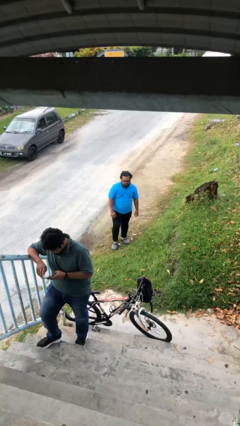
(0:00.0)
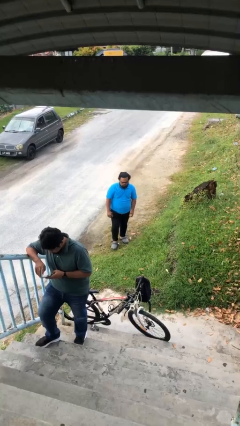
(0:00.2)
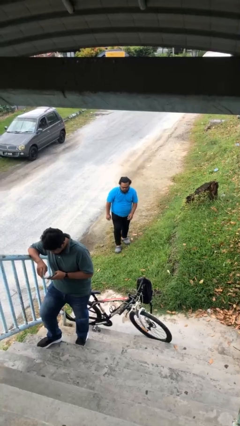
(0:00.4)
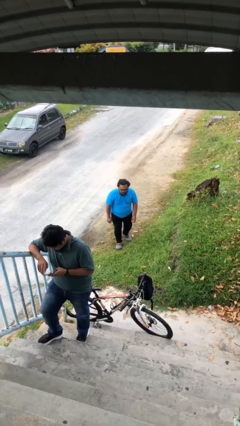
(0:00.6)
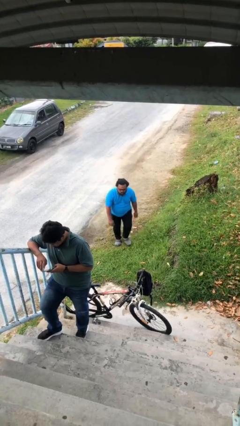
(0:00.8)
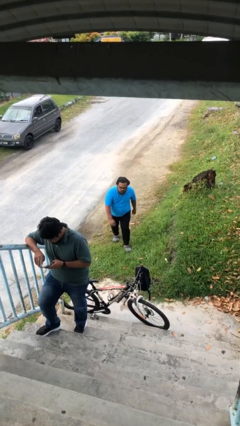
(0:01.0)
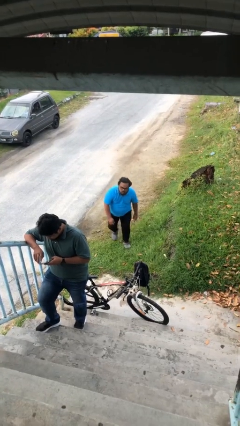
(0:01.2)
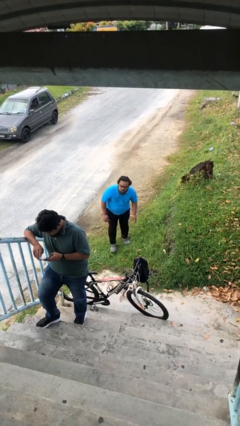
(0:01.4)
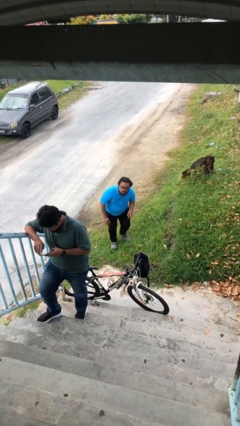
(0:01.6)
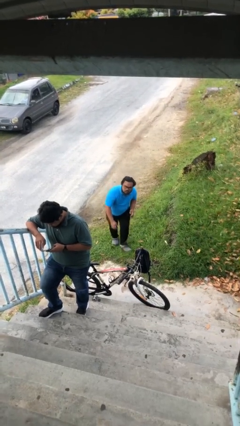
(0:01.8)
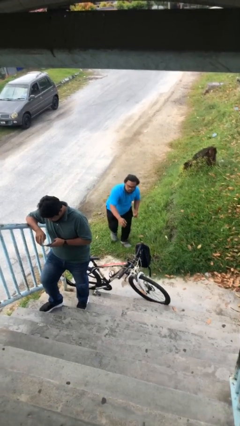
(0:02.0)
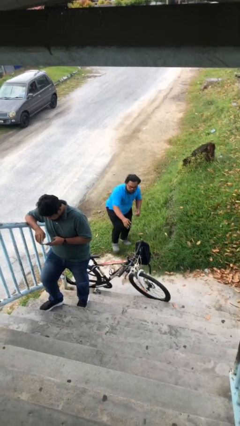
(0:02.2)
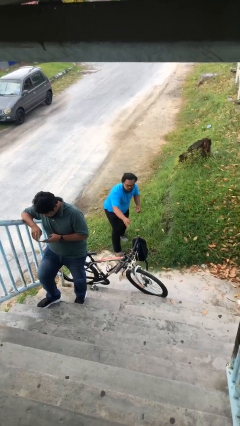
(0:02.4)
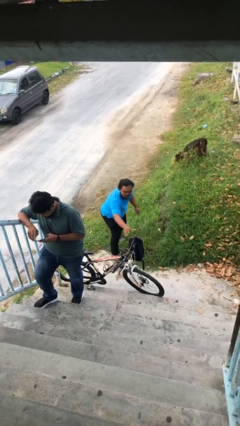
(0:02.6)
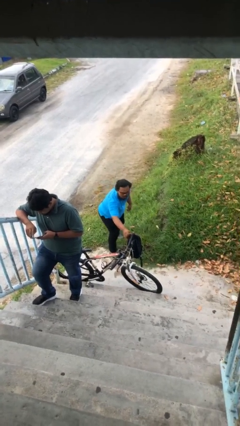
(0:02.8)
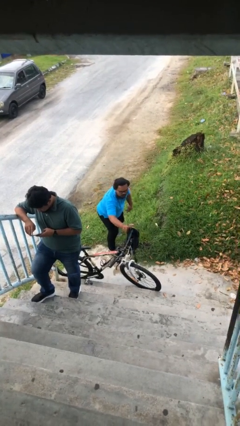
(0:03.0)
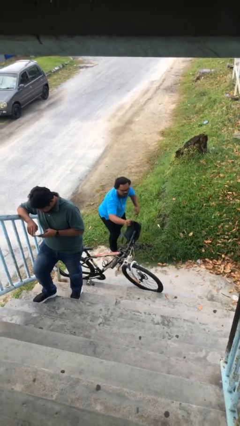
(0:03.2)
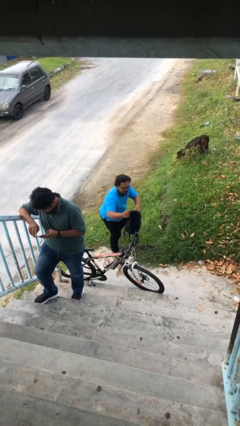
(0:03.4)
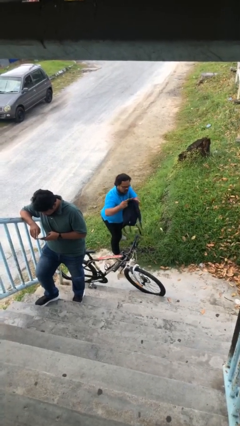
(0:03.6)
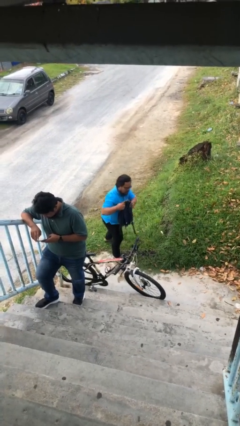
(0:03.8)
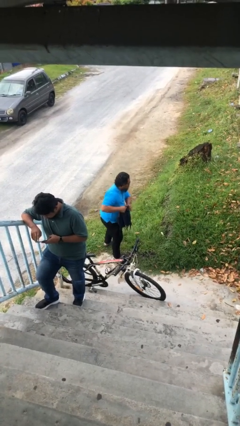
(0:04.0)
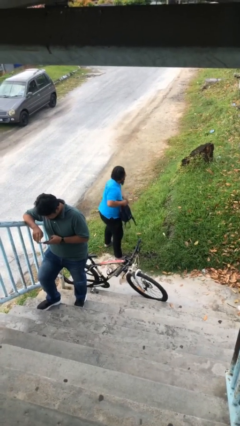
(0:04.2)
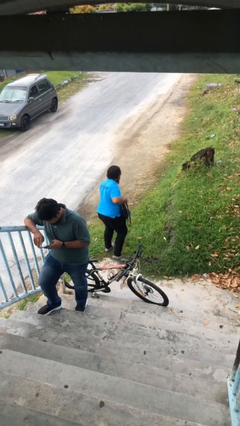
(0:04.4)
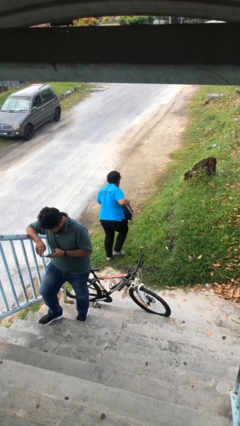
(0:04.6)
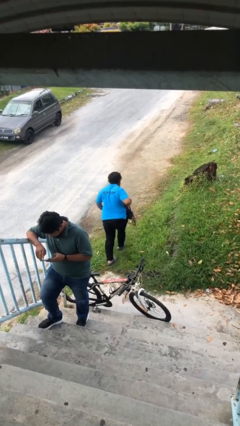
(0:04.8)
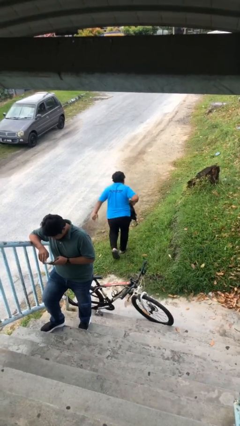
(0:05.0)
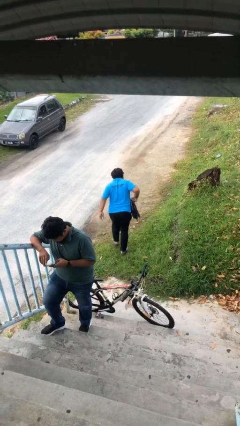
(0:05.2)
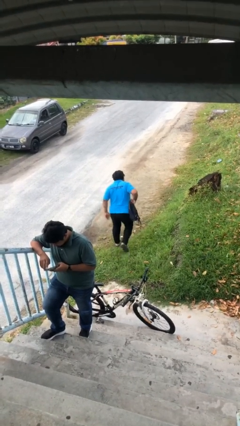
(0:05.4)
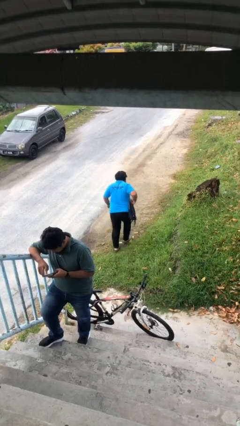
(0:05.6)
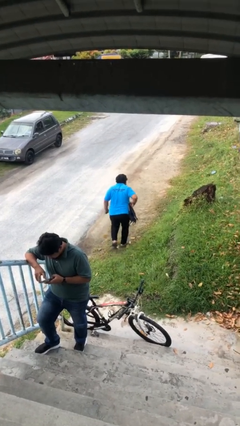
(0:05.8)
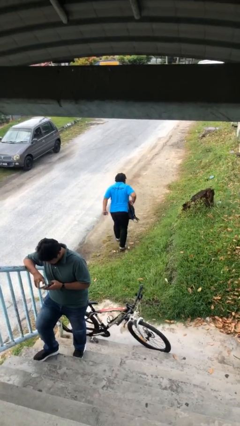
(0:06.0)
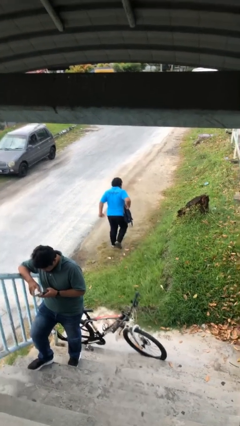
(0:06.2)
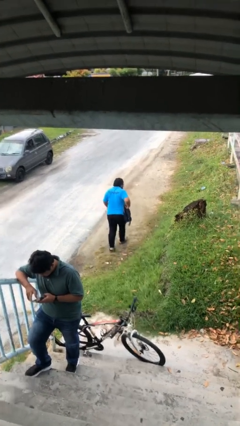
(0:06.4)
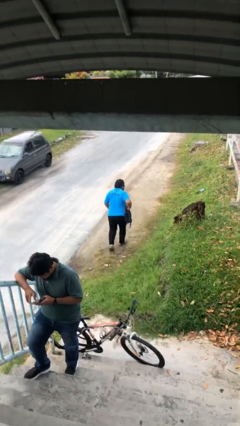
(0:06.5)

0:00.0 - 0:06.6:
person steals object from person

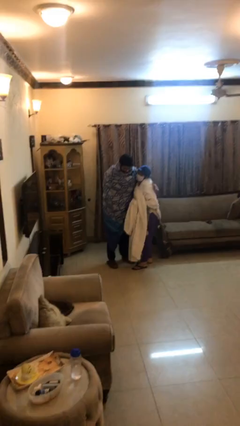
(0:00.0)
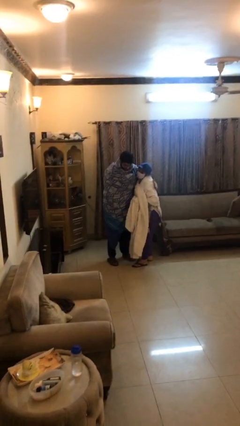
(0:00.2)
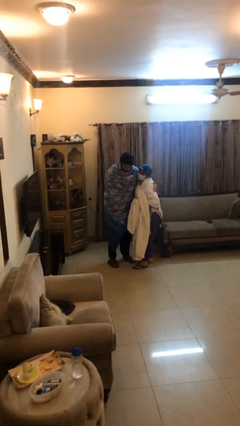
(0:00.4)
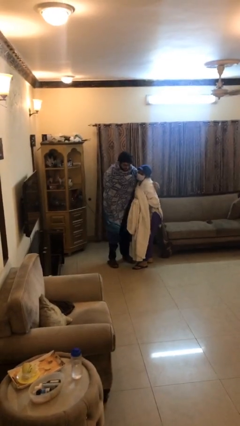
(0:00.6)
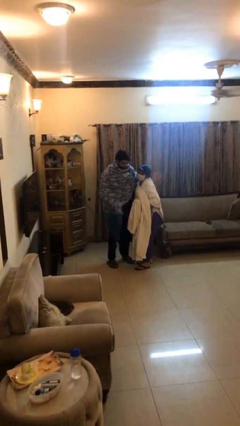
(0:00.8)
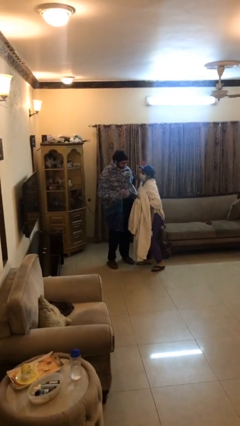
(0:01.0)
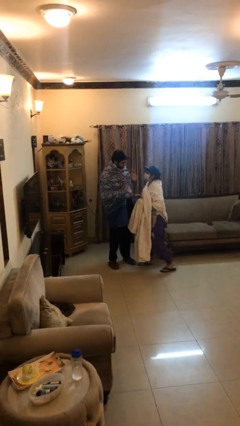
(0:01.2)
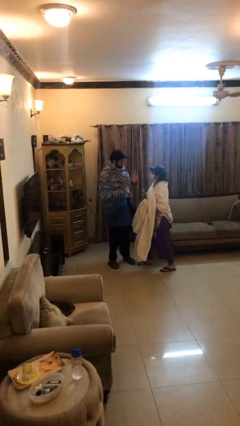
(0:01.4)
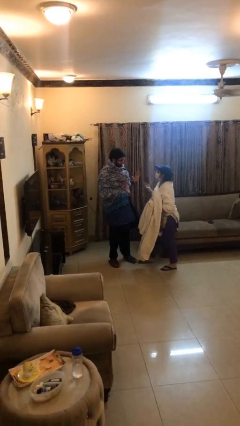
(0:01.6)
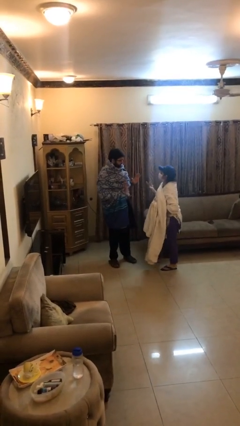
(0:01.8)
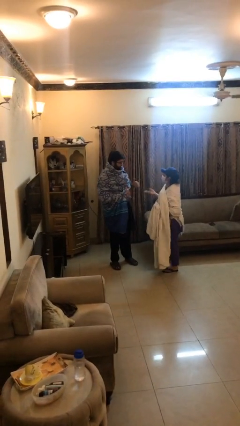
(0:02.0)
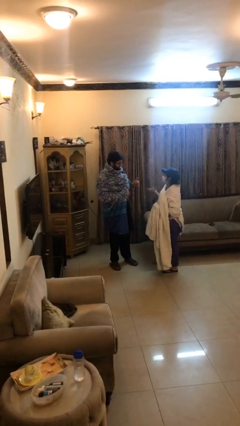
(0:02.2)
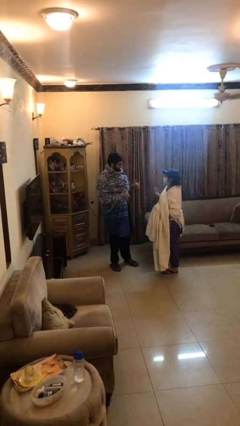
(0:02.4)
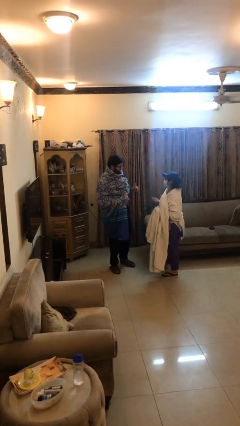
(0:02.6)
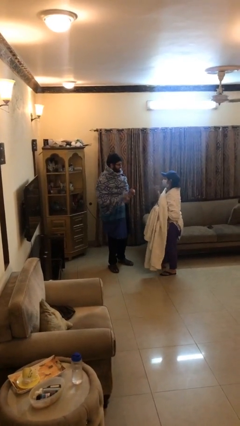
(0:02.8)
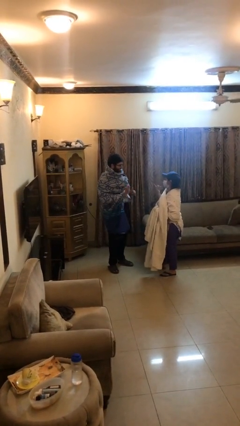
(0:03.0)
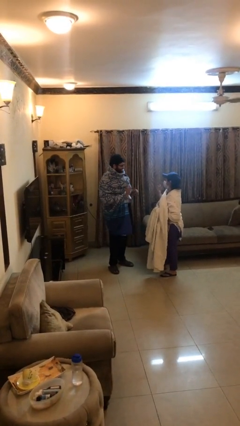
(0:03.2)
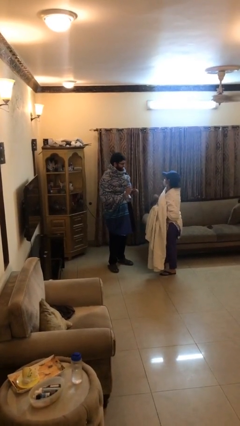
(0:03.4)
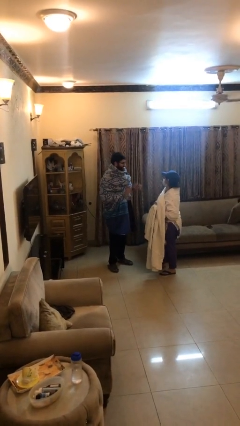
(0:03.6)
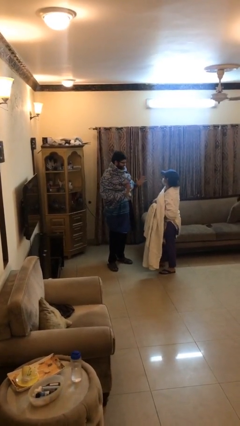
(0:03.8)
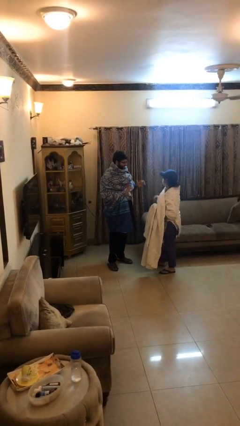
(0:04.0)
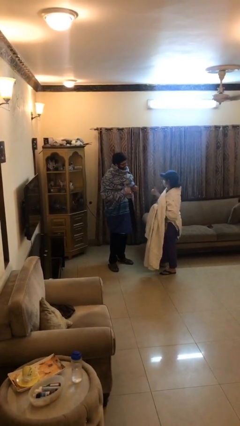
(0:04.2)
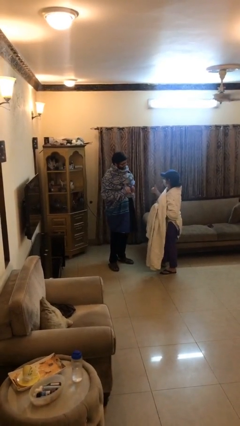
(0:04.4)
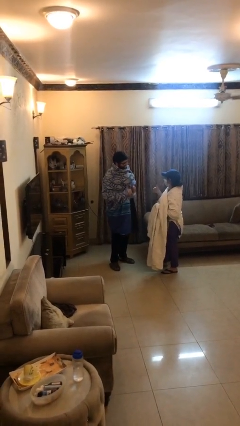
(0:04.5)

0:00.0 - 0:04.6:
person talks to person

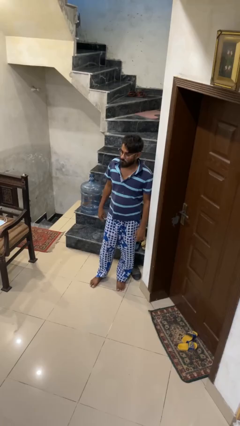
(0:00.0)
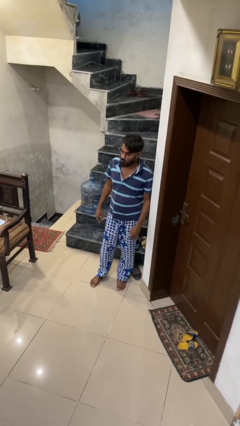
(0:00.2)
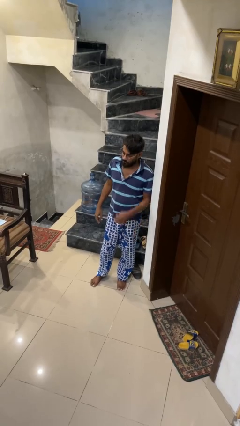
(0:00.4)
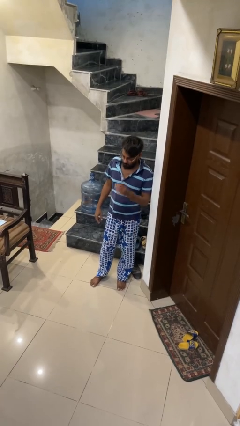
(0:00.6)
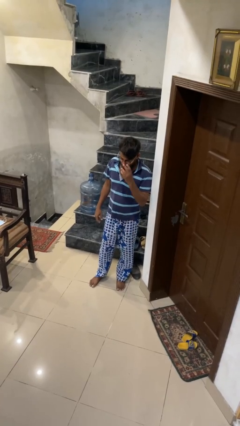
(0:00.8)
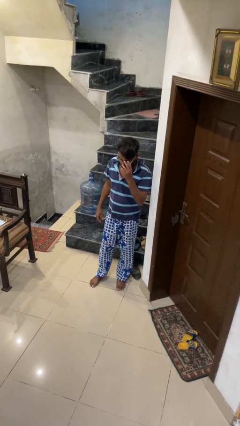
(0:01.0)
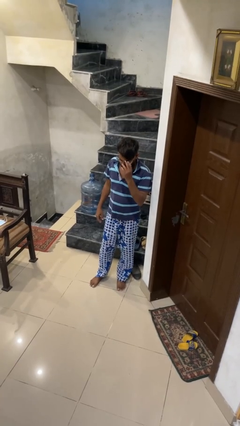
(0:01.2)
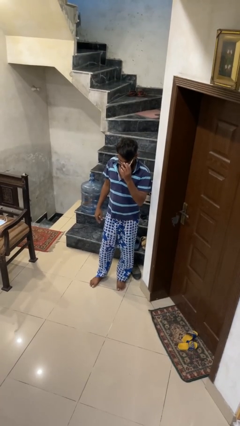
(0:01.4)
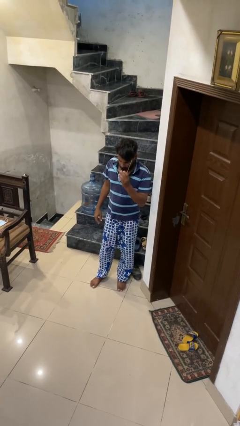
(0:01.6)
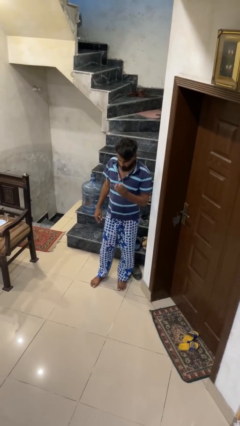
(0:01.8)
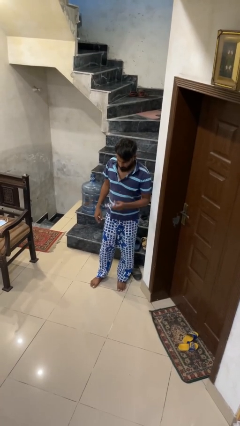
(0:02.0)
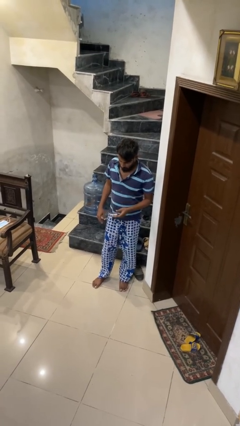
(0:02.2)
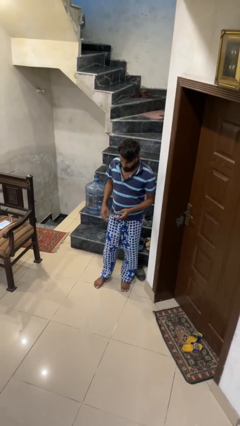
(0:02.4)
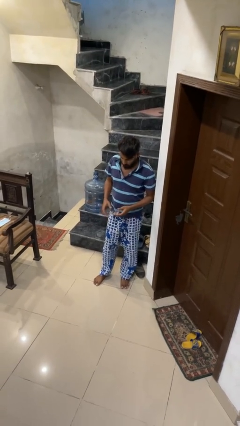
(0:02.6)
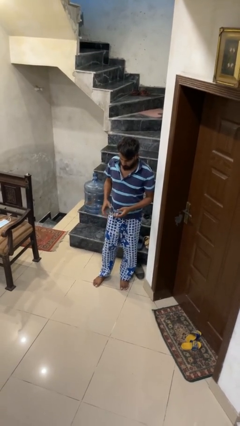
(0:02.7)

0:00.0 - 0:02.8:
person takes off glasses

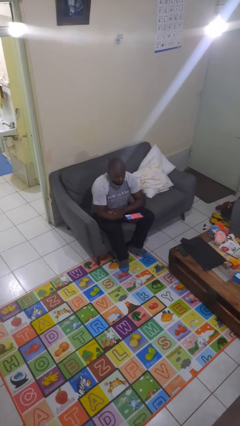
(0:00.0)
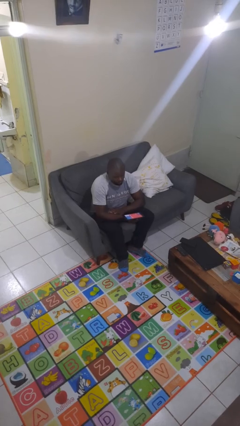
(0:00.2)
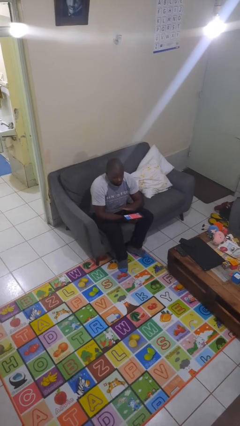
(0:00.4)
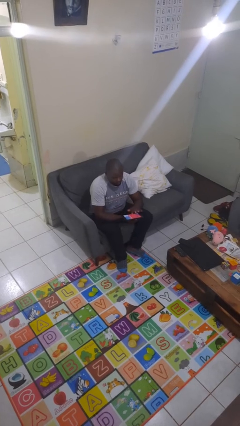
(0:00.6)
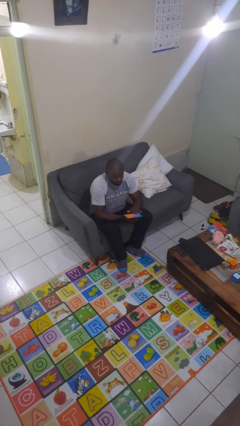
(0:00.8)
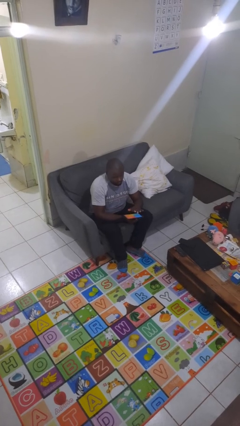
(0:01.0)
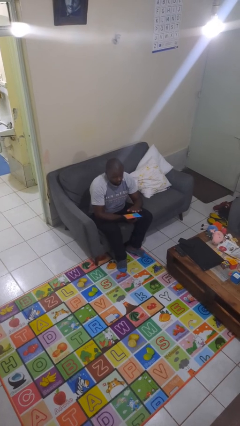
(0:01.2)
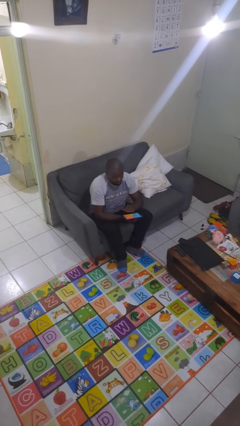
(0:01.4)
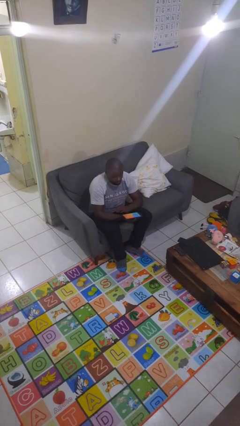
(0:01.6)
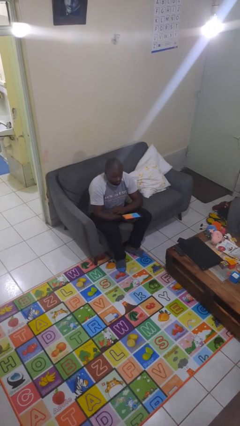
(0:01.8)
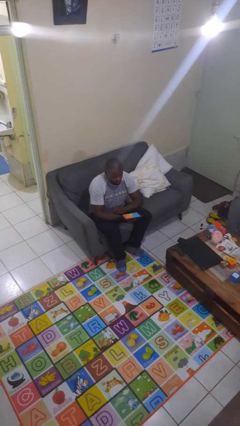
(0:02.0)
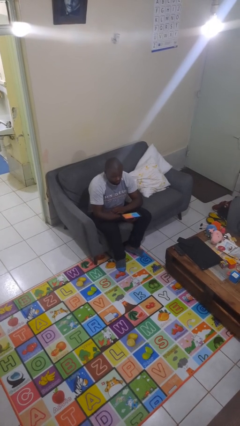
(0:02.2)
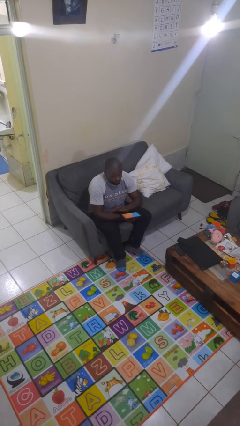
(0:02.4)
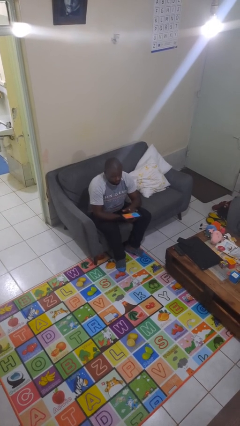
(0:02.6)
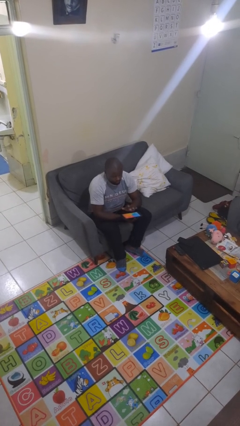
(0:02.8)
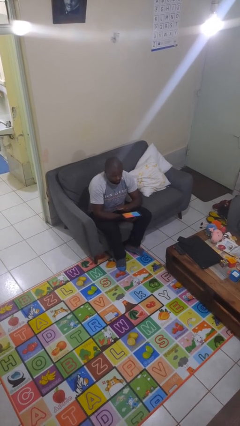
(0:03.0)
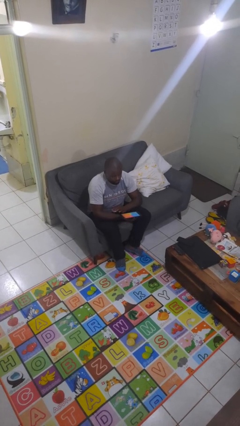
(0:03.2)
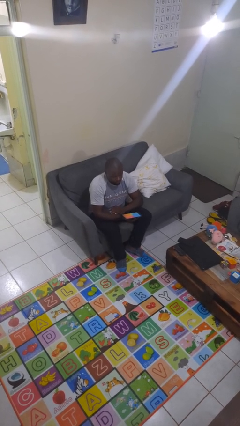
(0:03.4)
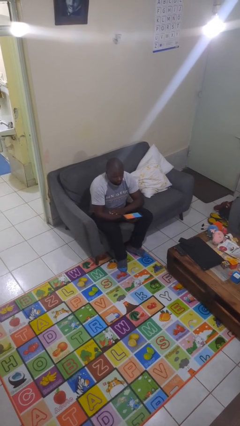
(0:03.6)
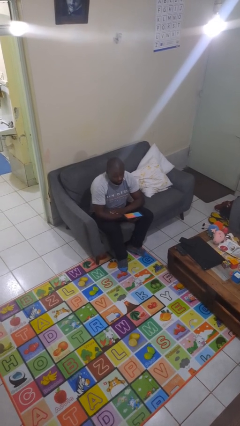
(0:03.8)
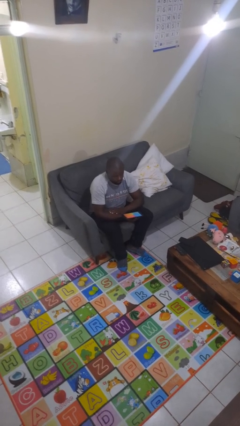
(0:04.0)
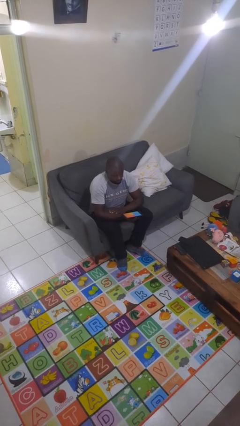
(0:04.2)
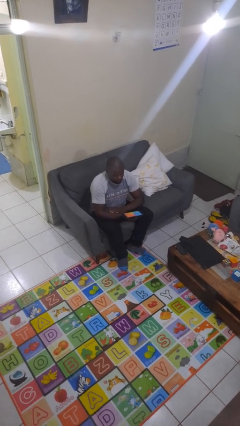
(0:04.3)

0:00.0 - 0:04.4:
person interacts with tablet
